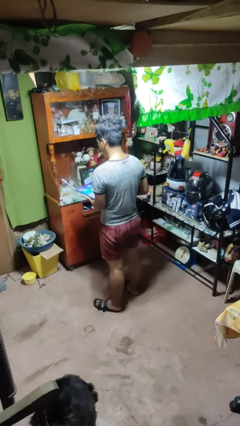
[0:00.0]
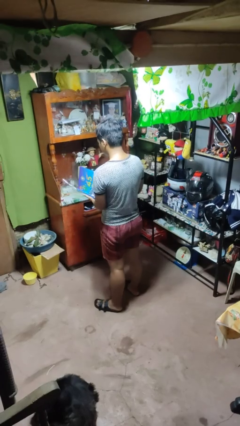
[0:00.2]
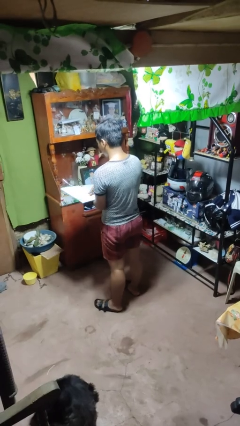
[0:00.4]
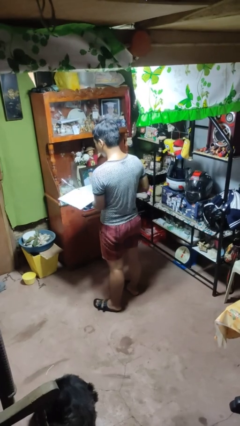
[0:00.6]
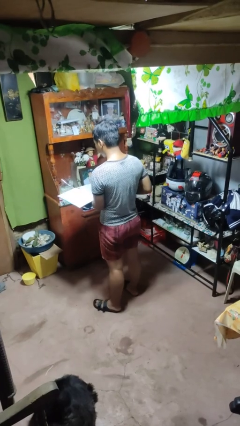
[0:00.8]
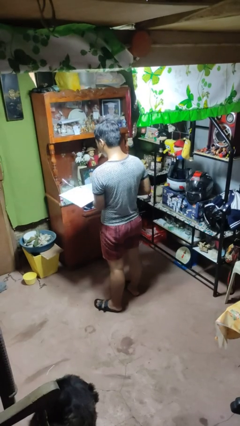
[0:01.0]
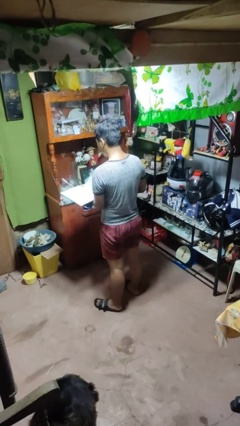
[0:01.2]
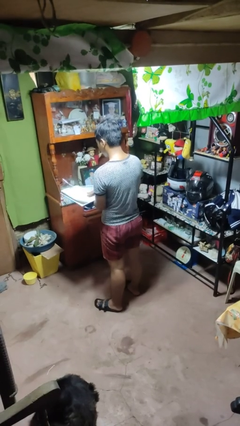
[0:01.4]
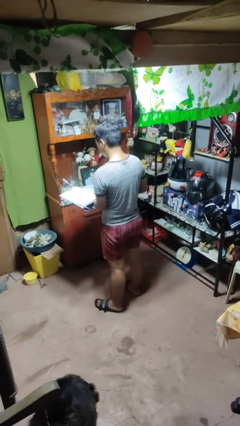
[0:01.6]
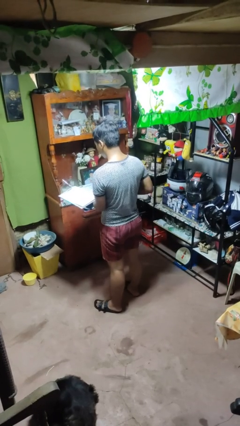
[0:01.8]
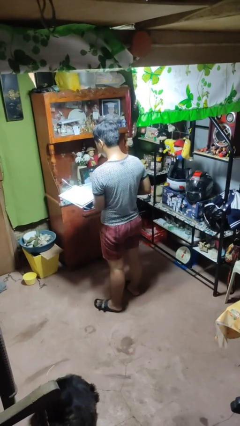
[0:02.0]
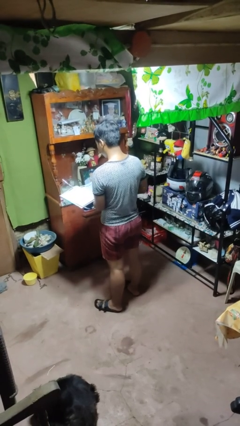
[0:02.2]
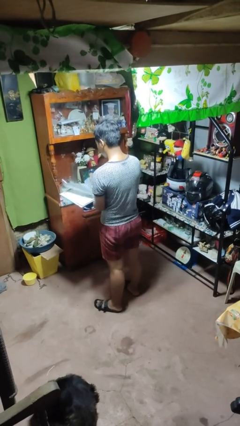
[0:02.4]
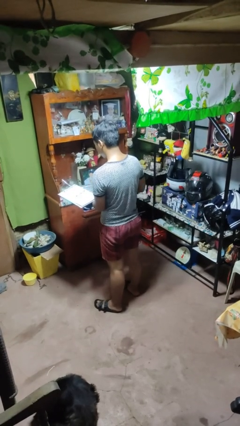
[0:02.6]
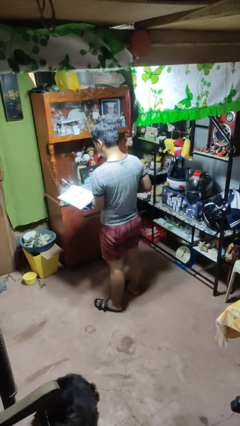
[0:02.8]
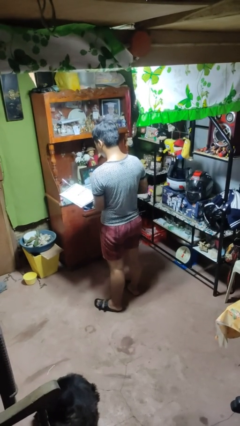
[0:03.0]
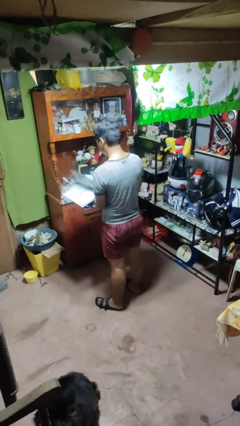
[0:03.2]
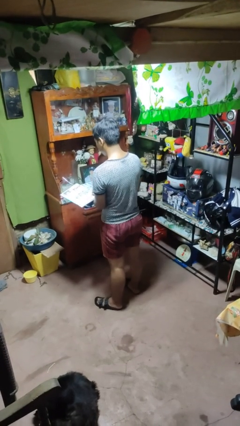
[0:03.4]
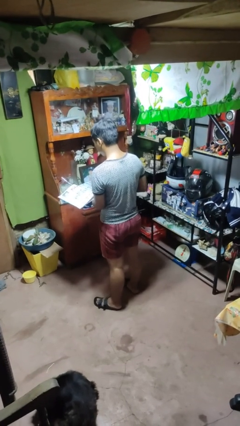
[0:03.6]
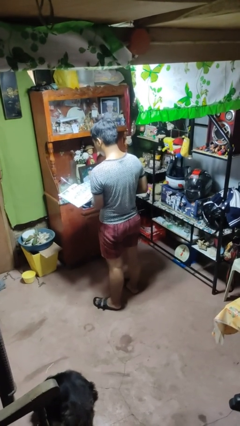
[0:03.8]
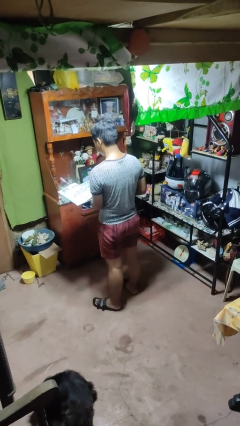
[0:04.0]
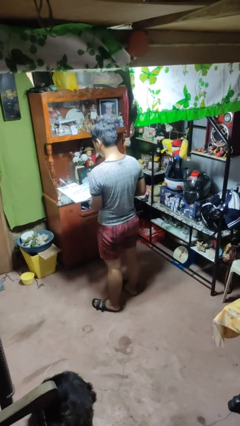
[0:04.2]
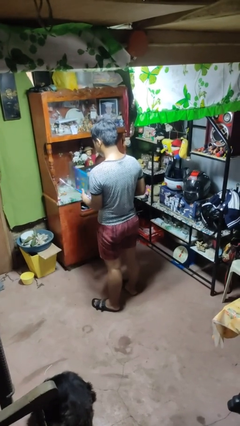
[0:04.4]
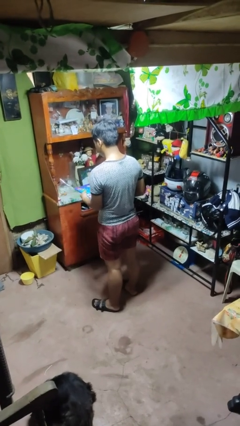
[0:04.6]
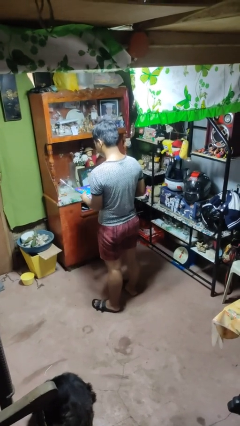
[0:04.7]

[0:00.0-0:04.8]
person reads magazine

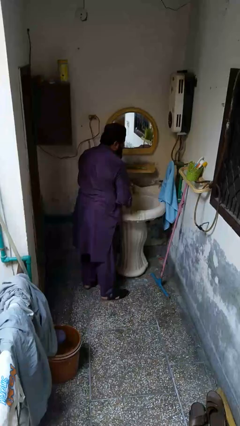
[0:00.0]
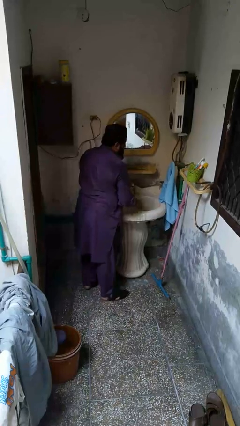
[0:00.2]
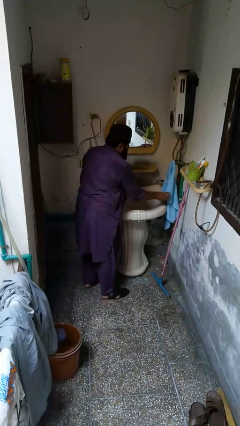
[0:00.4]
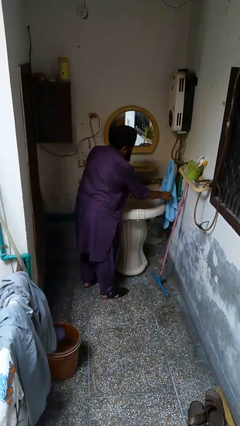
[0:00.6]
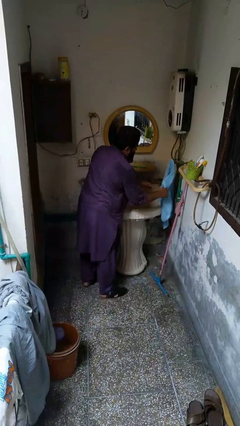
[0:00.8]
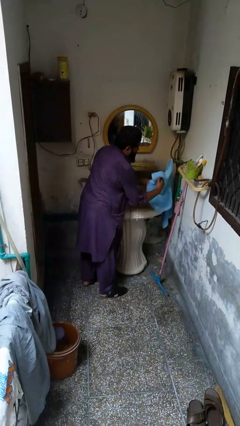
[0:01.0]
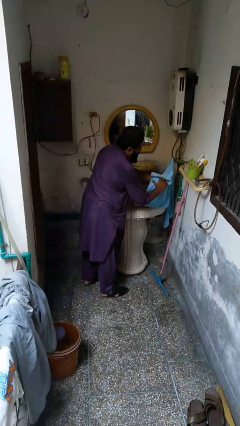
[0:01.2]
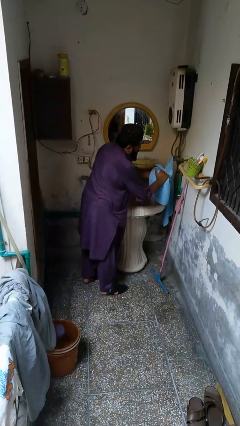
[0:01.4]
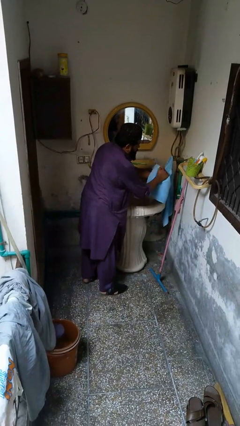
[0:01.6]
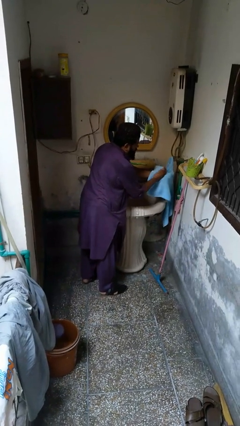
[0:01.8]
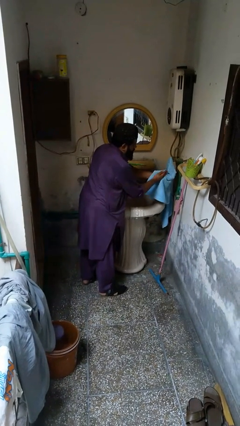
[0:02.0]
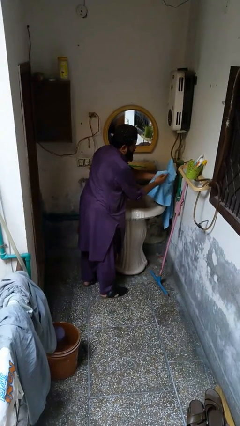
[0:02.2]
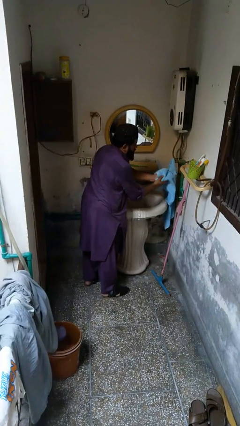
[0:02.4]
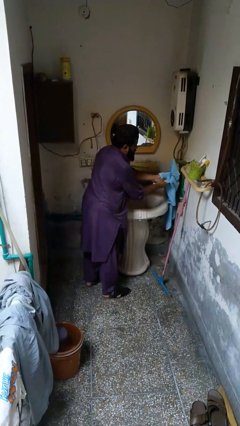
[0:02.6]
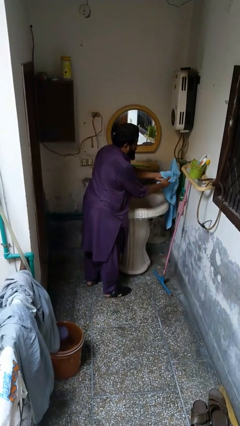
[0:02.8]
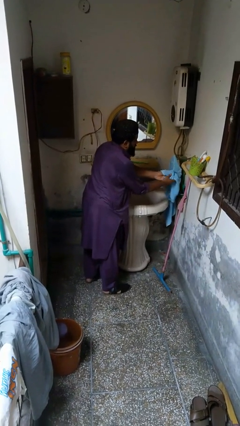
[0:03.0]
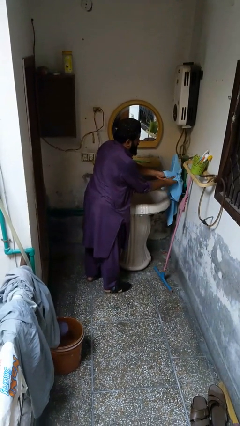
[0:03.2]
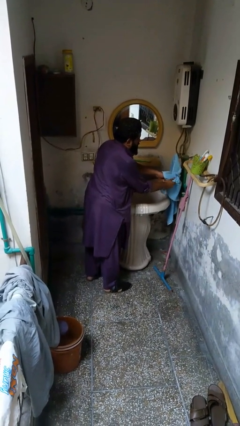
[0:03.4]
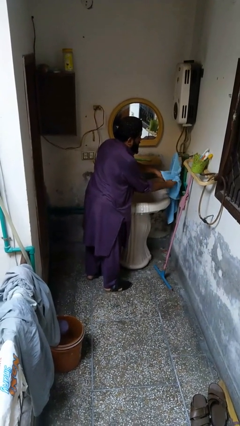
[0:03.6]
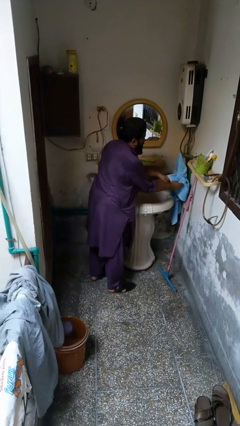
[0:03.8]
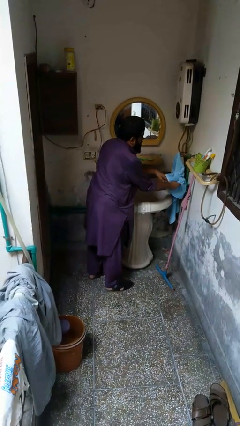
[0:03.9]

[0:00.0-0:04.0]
person dries hands with towel

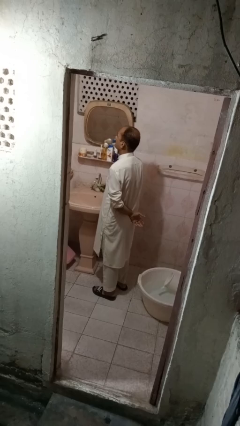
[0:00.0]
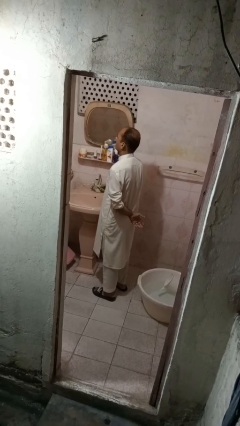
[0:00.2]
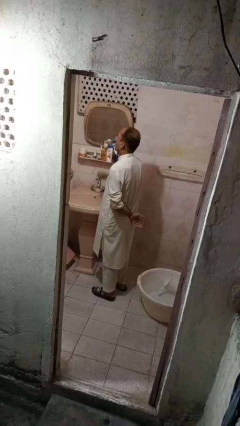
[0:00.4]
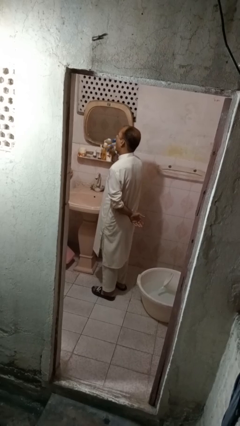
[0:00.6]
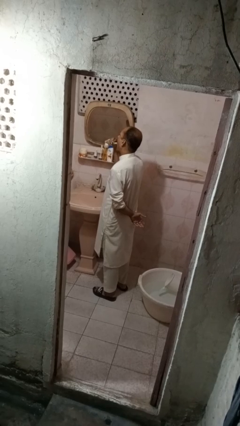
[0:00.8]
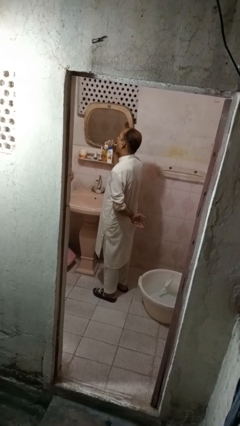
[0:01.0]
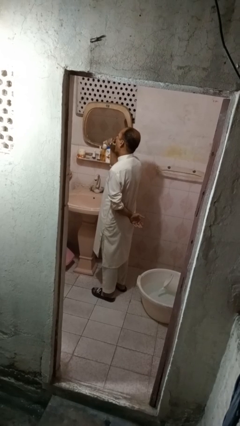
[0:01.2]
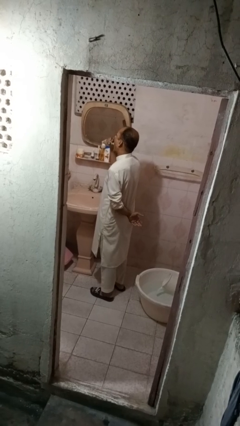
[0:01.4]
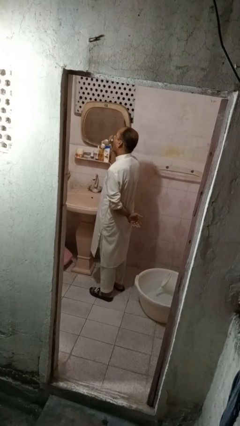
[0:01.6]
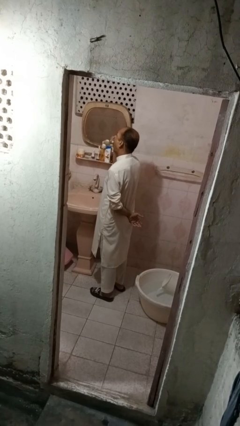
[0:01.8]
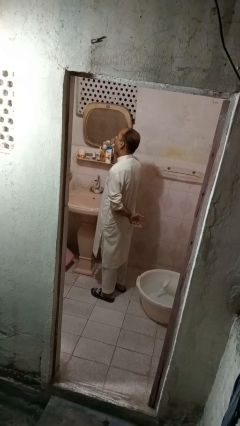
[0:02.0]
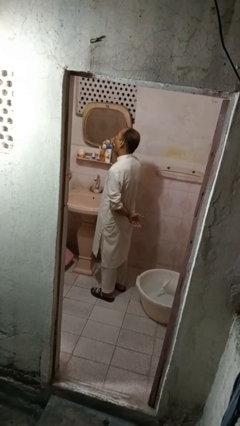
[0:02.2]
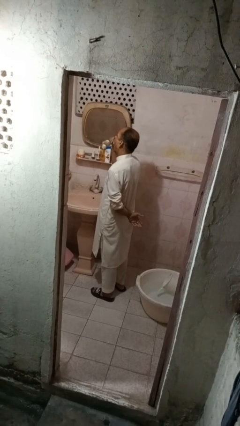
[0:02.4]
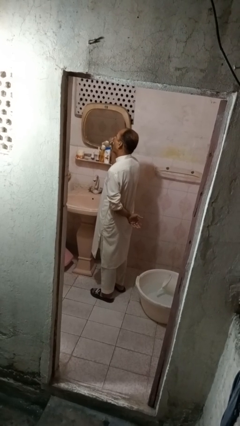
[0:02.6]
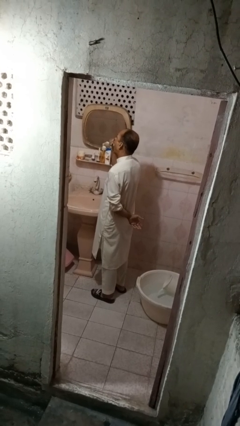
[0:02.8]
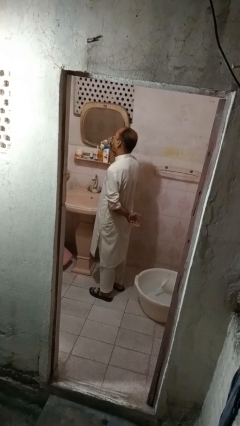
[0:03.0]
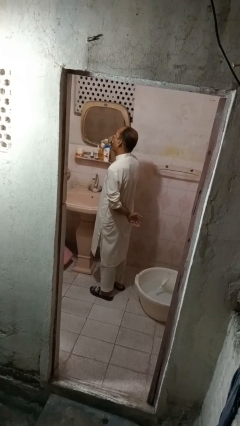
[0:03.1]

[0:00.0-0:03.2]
person brushes teeth

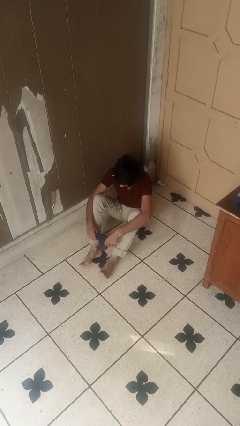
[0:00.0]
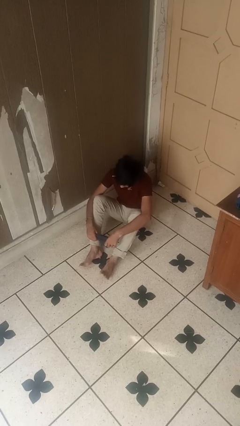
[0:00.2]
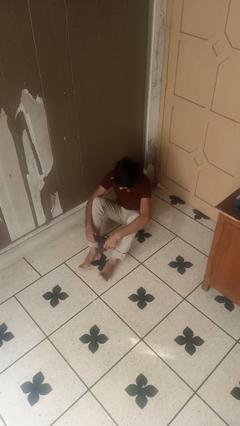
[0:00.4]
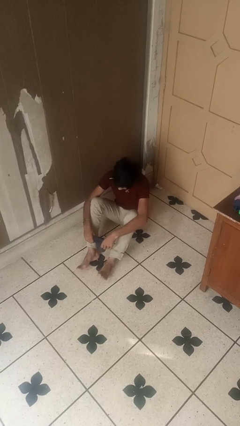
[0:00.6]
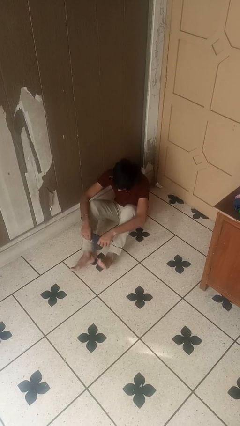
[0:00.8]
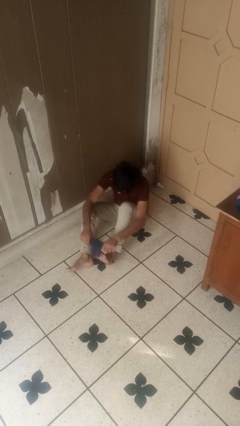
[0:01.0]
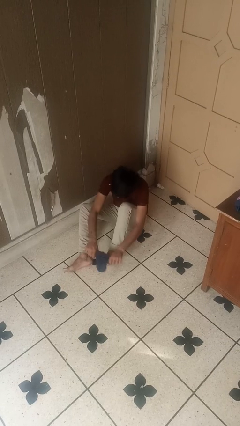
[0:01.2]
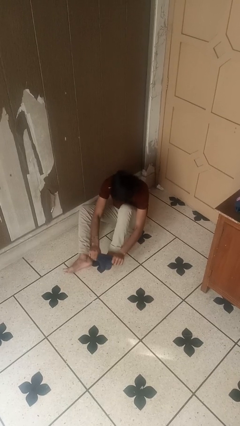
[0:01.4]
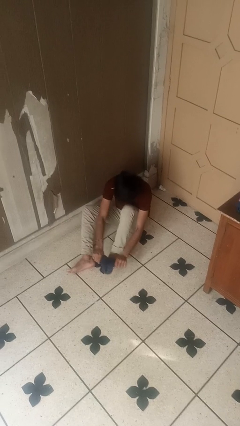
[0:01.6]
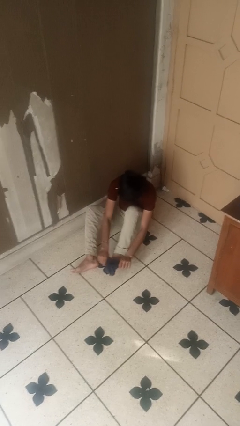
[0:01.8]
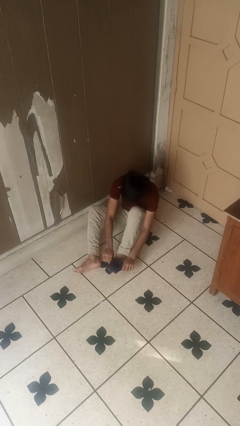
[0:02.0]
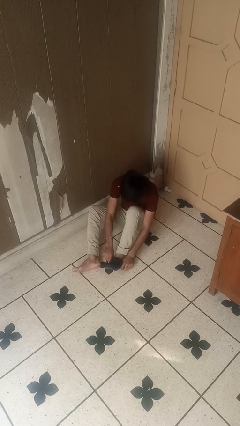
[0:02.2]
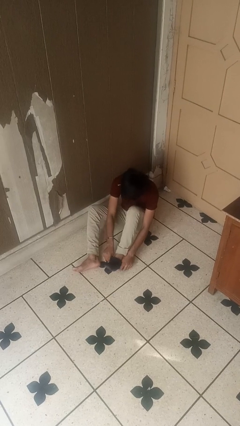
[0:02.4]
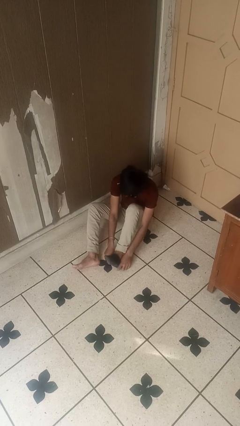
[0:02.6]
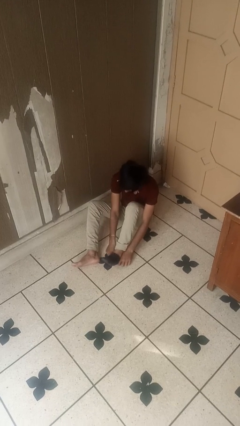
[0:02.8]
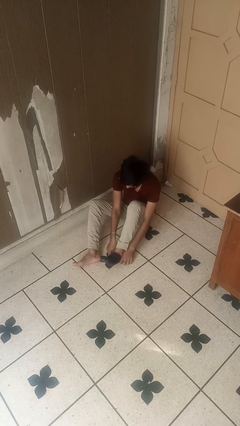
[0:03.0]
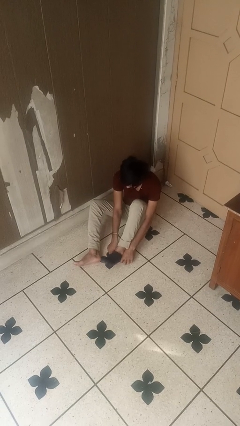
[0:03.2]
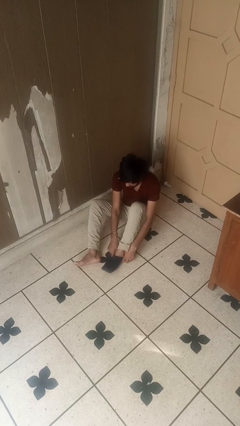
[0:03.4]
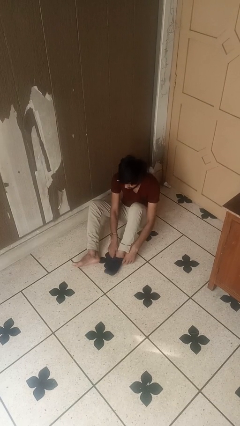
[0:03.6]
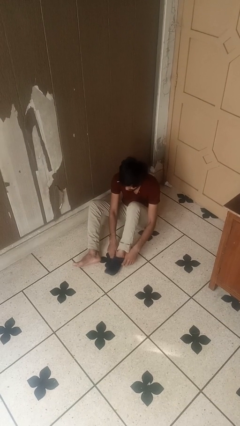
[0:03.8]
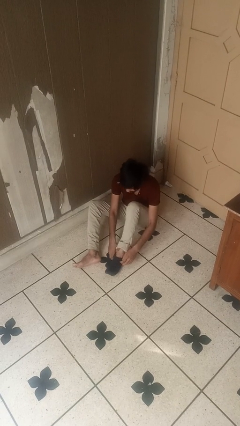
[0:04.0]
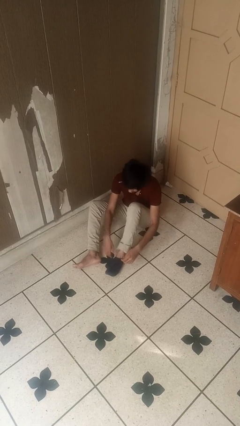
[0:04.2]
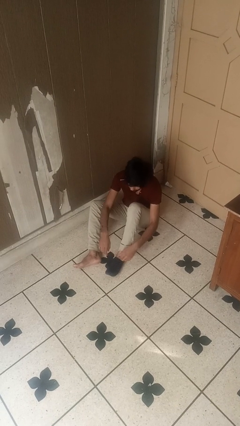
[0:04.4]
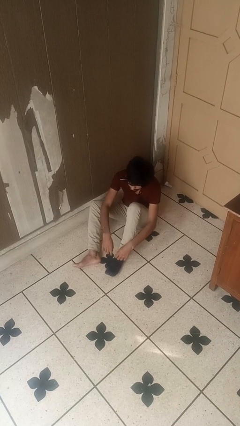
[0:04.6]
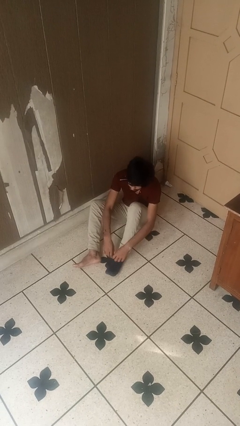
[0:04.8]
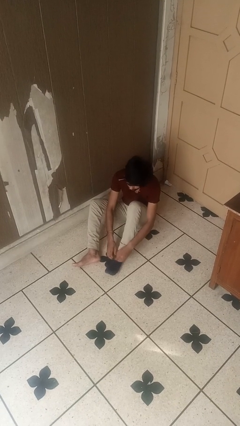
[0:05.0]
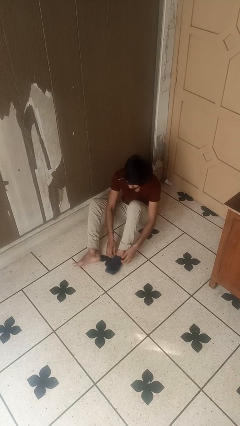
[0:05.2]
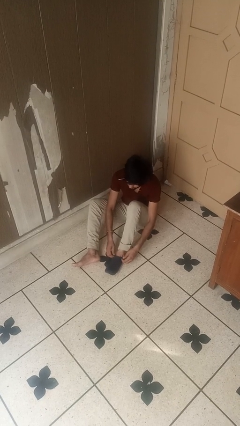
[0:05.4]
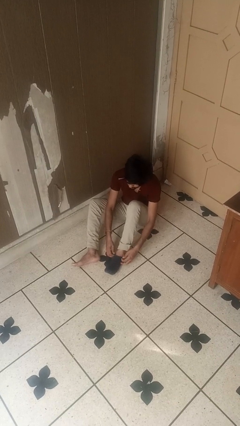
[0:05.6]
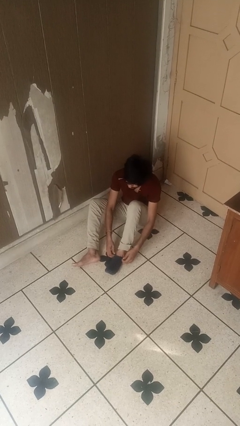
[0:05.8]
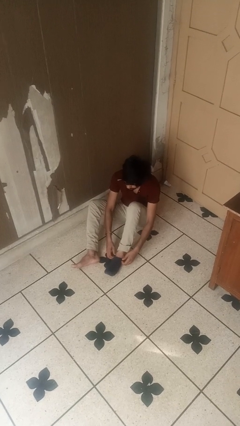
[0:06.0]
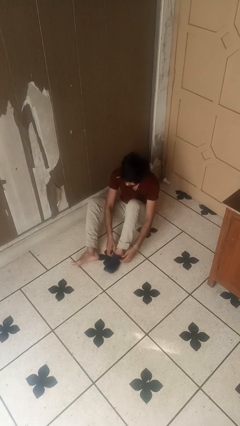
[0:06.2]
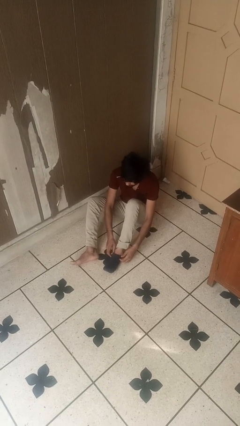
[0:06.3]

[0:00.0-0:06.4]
person puts on socks
